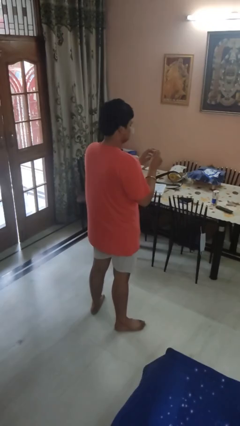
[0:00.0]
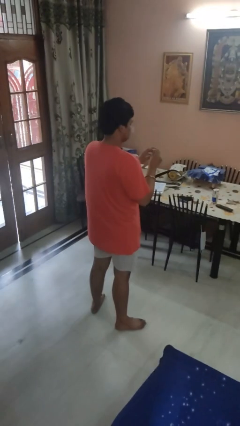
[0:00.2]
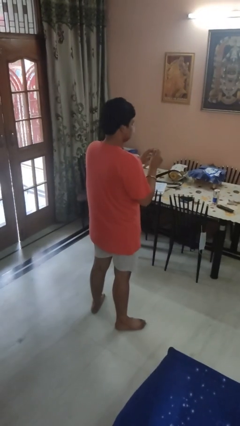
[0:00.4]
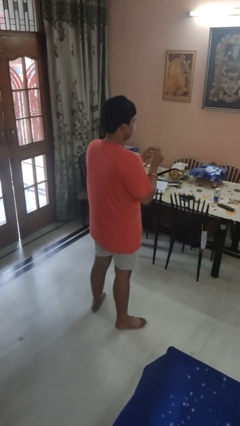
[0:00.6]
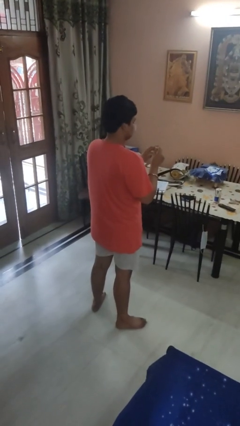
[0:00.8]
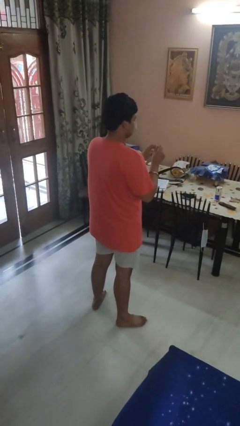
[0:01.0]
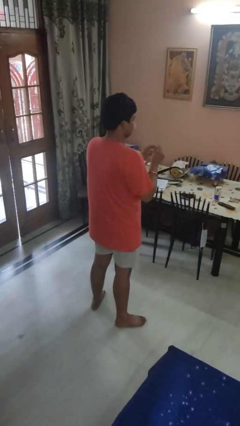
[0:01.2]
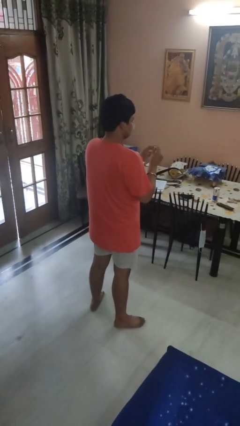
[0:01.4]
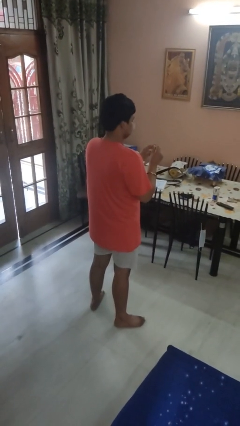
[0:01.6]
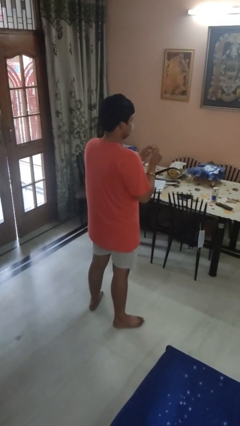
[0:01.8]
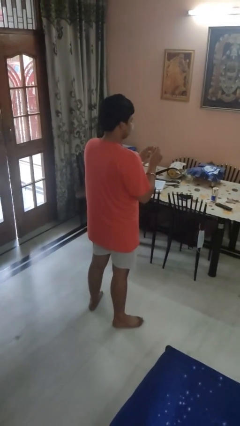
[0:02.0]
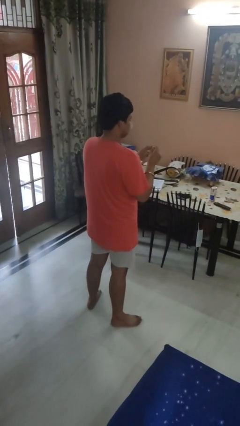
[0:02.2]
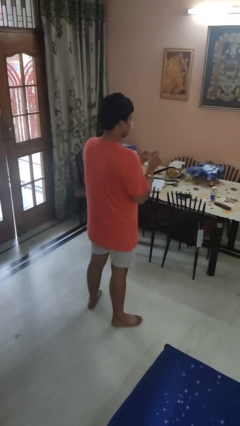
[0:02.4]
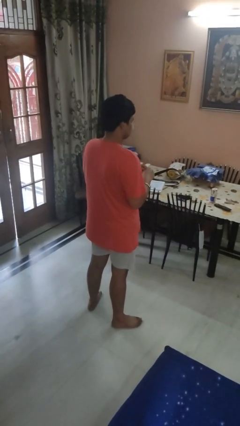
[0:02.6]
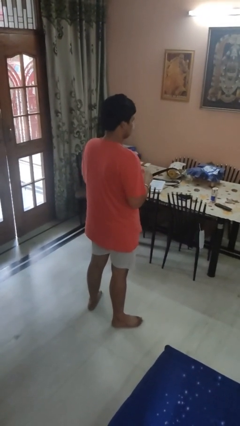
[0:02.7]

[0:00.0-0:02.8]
person files fingernails

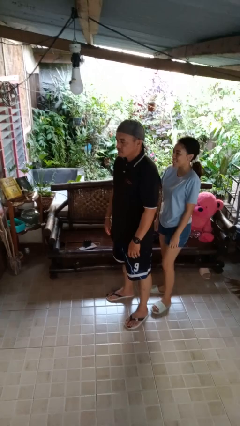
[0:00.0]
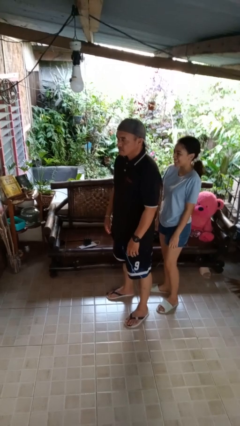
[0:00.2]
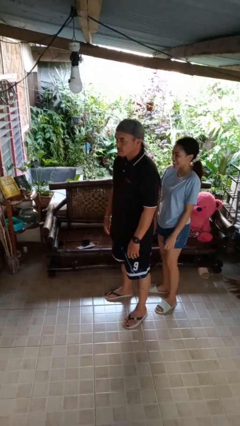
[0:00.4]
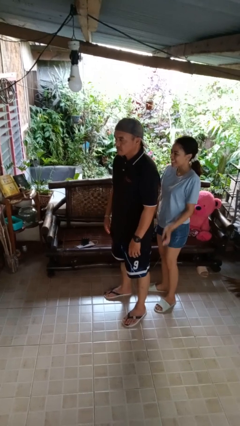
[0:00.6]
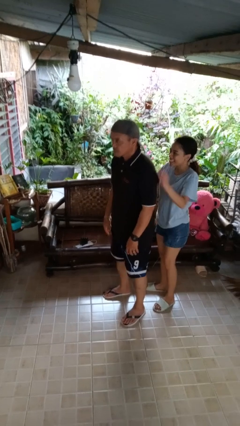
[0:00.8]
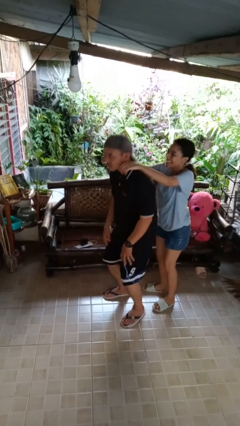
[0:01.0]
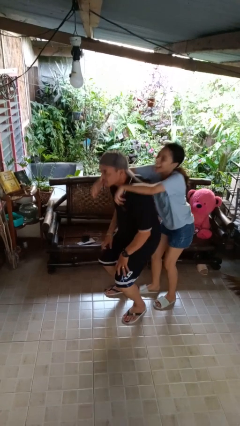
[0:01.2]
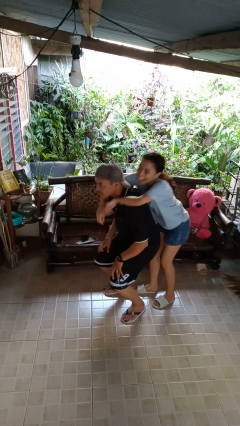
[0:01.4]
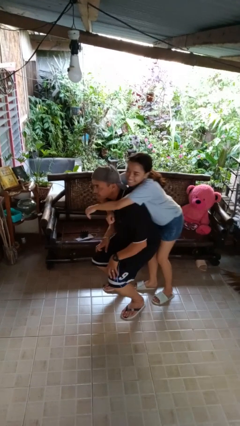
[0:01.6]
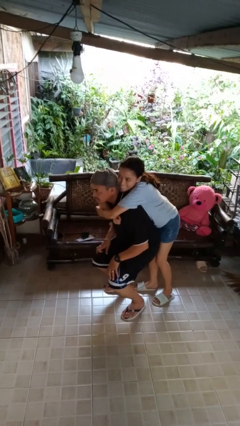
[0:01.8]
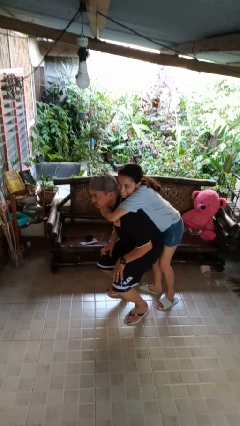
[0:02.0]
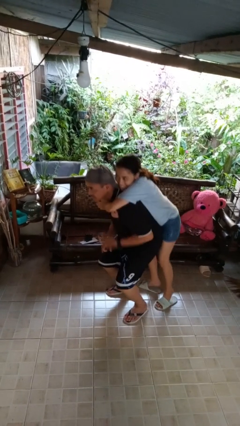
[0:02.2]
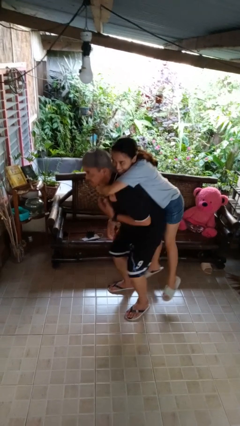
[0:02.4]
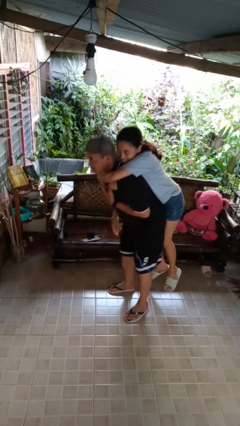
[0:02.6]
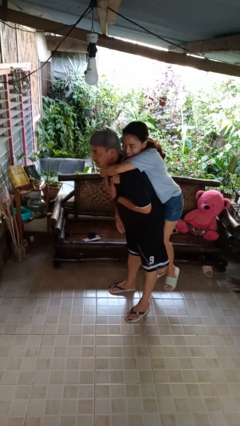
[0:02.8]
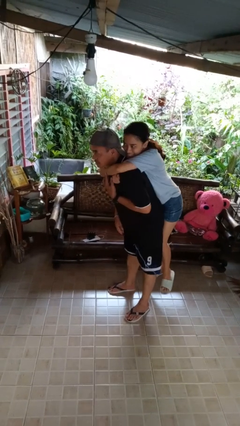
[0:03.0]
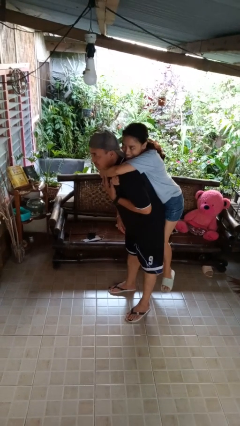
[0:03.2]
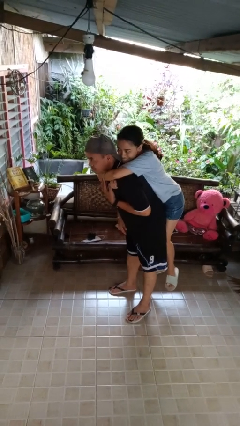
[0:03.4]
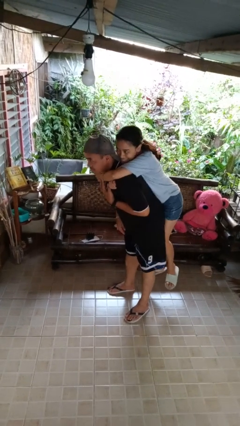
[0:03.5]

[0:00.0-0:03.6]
person picks up person

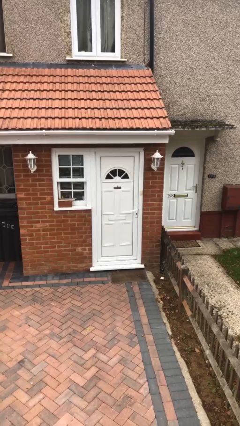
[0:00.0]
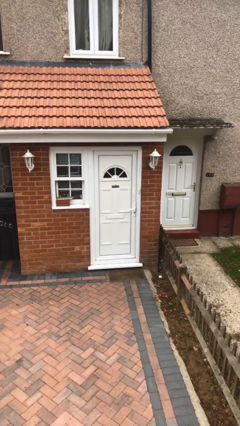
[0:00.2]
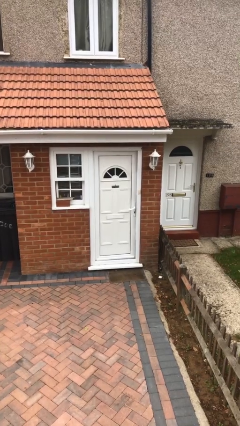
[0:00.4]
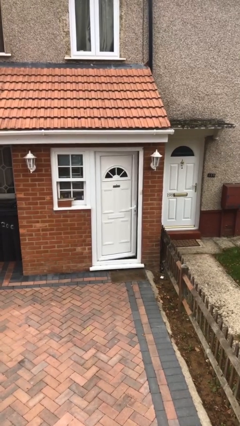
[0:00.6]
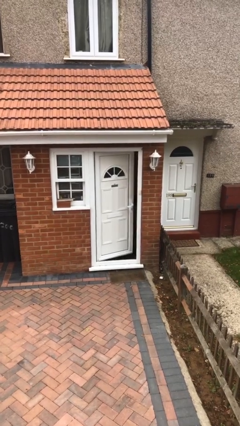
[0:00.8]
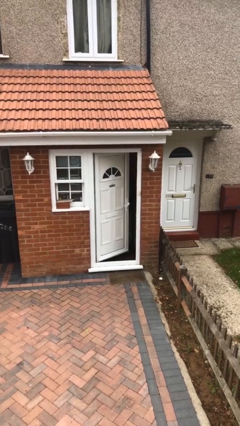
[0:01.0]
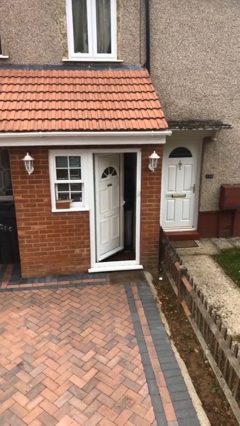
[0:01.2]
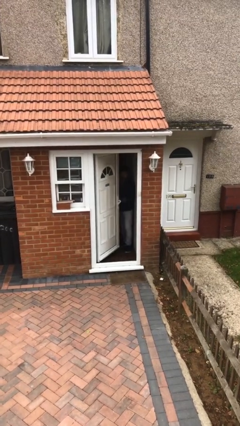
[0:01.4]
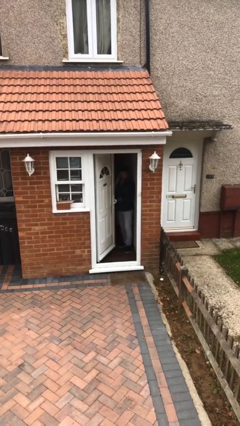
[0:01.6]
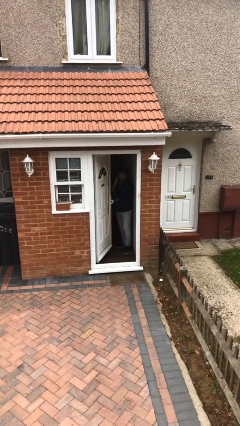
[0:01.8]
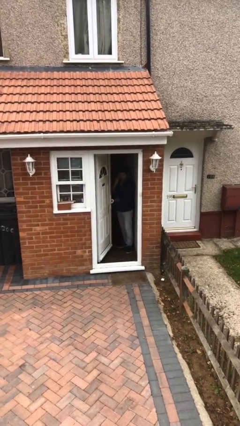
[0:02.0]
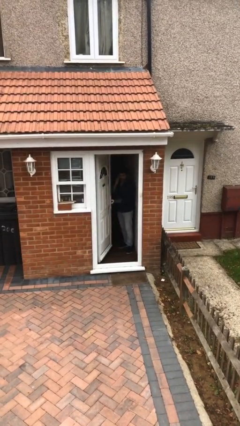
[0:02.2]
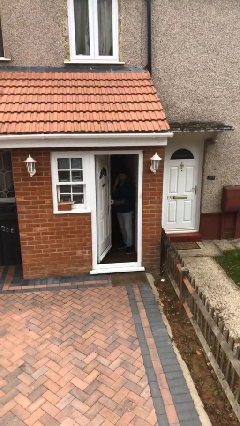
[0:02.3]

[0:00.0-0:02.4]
person opens facility door

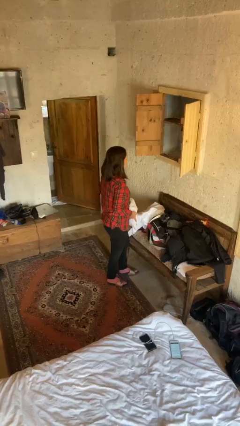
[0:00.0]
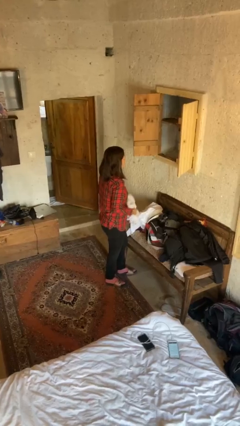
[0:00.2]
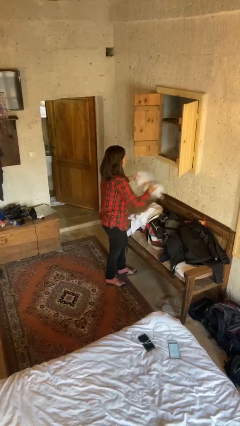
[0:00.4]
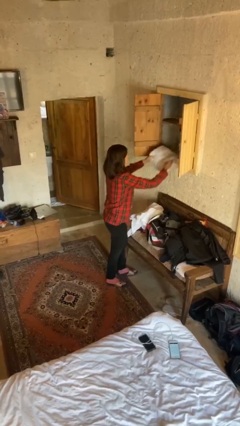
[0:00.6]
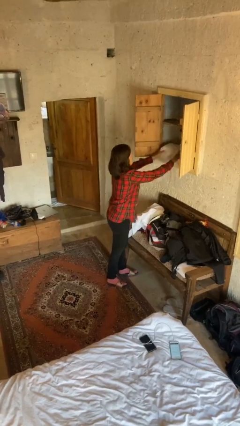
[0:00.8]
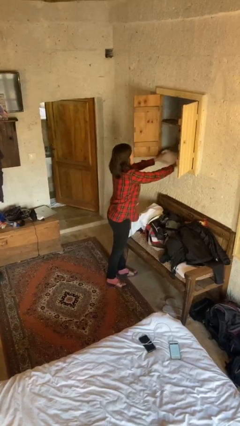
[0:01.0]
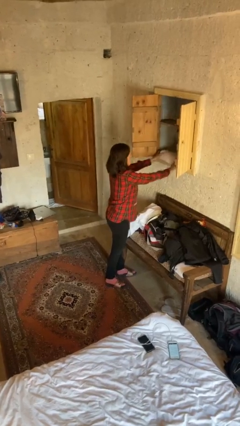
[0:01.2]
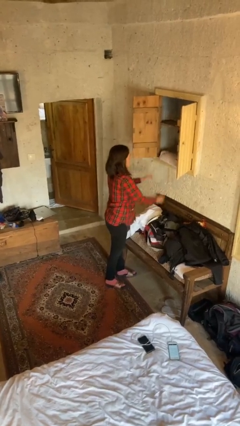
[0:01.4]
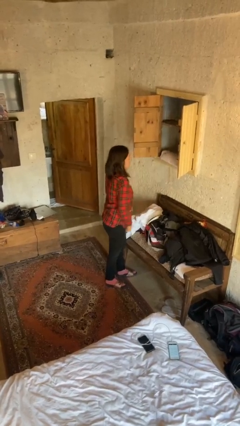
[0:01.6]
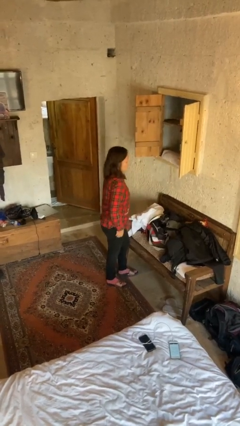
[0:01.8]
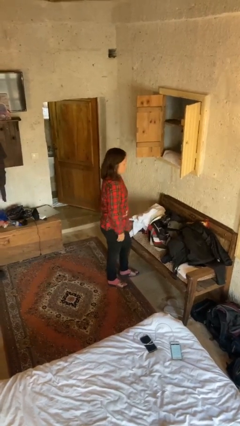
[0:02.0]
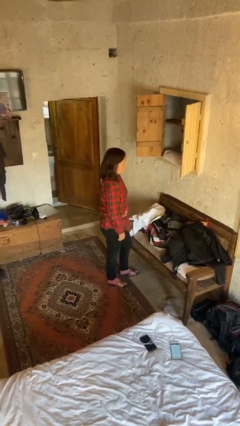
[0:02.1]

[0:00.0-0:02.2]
person puts clothes into dresser

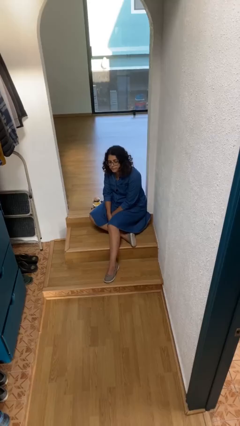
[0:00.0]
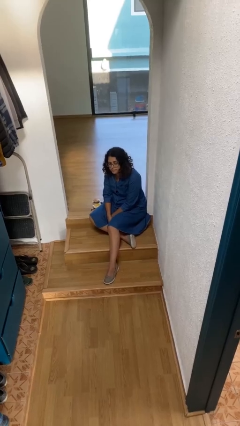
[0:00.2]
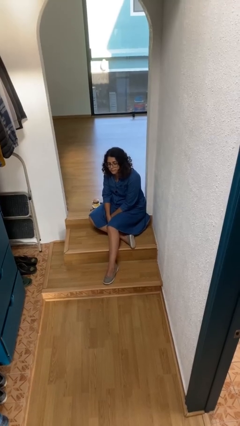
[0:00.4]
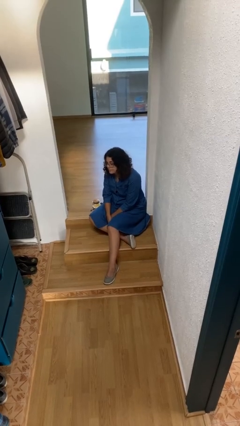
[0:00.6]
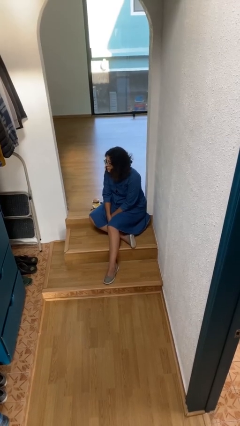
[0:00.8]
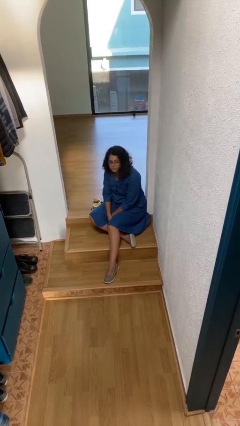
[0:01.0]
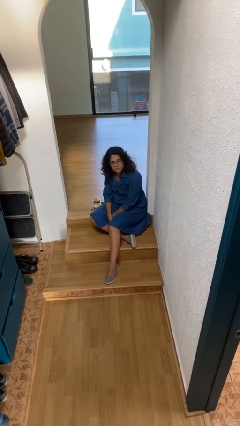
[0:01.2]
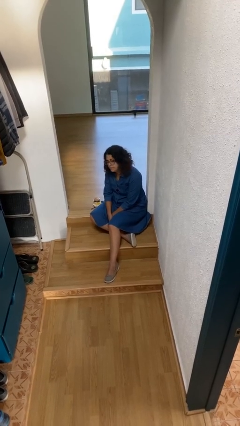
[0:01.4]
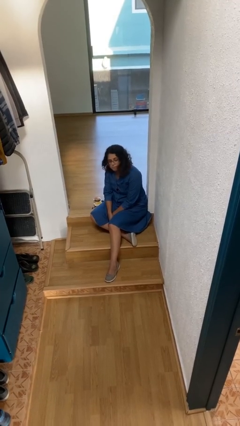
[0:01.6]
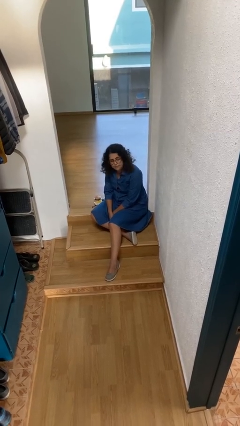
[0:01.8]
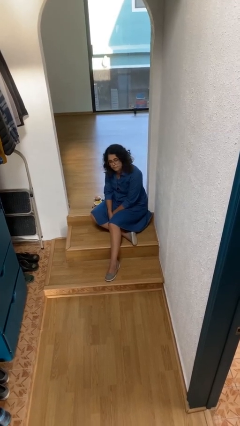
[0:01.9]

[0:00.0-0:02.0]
person shakes head

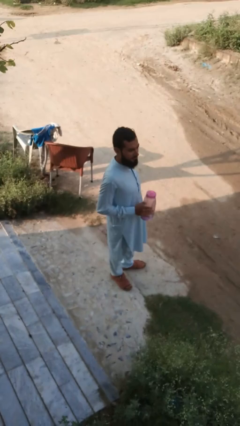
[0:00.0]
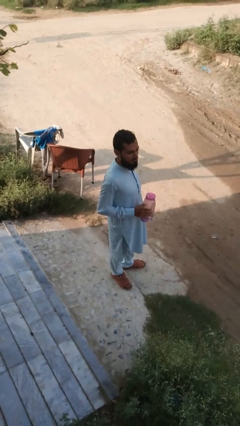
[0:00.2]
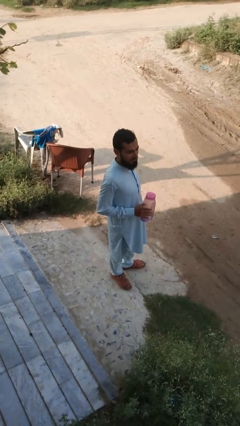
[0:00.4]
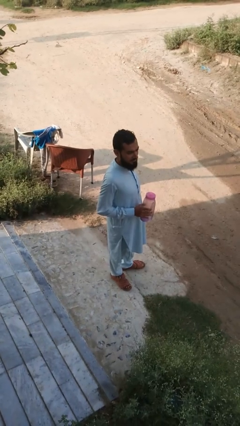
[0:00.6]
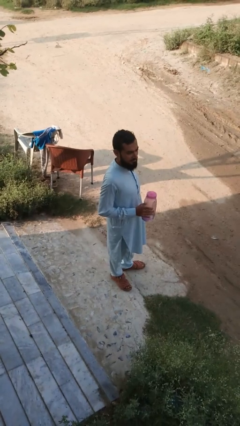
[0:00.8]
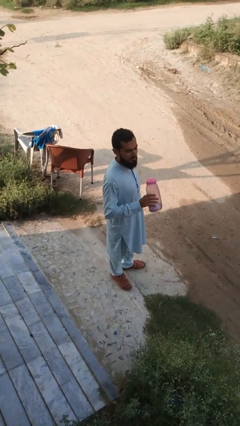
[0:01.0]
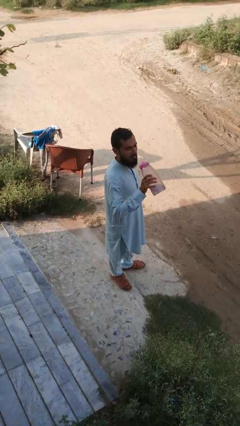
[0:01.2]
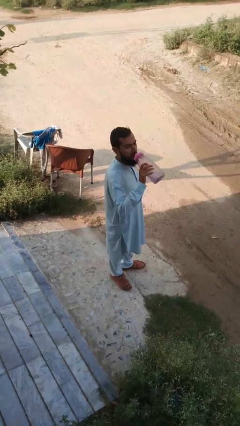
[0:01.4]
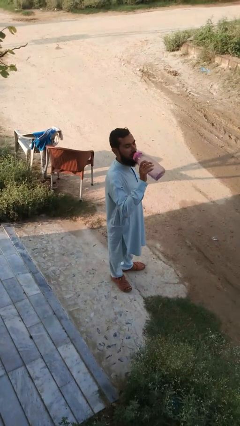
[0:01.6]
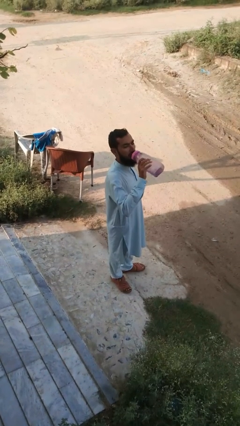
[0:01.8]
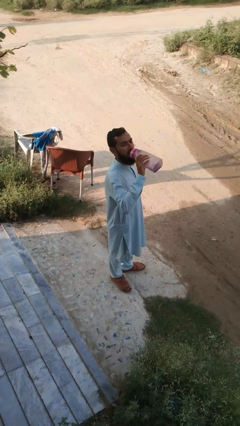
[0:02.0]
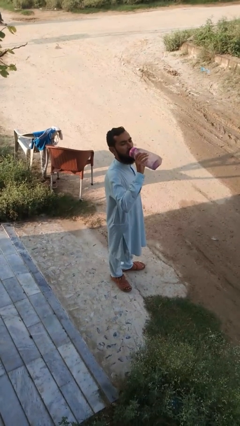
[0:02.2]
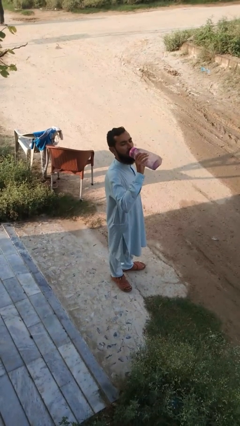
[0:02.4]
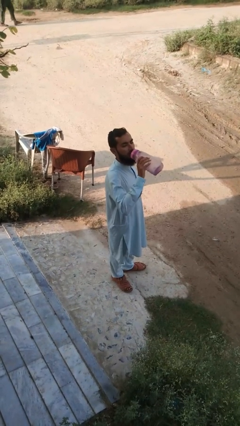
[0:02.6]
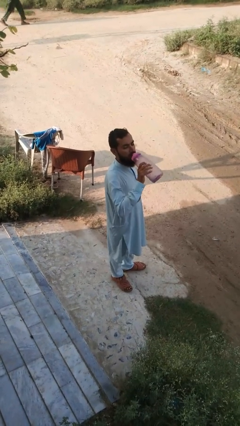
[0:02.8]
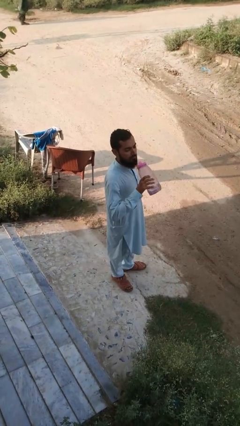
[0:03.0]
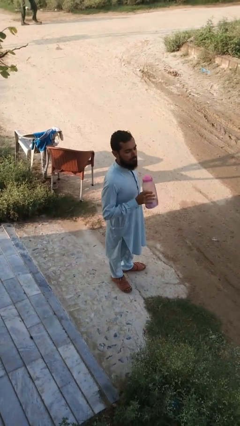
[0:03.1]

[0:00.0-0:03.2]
person drinks from bottle

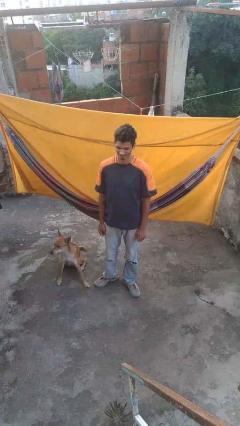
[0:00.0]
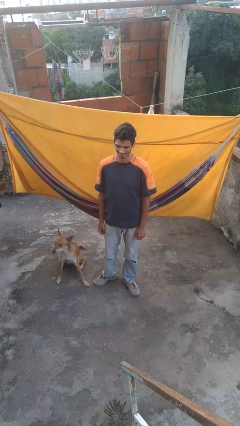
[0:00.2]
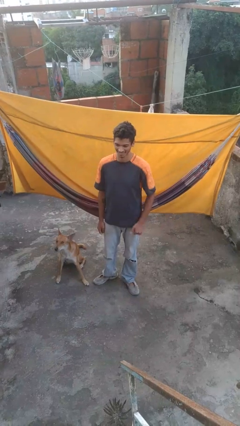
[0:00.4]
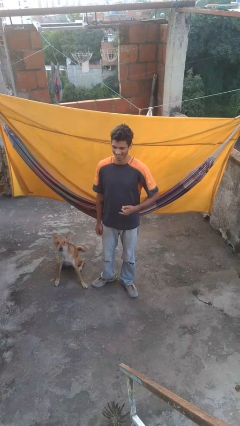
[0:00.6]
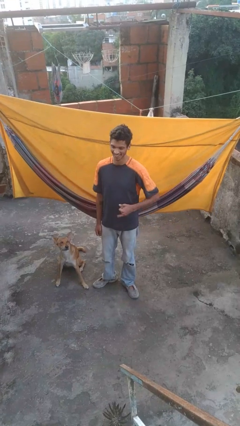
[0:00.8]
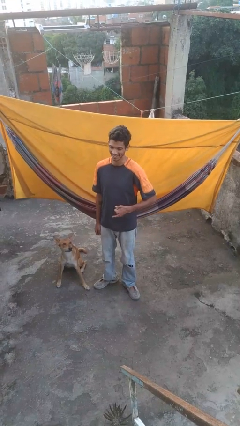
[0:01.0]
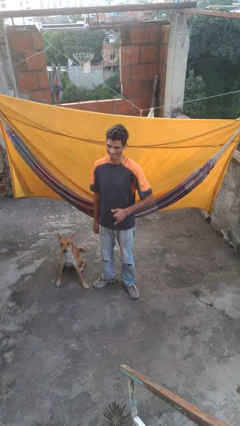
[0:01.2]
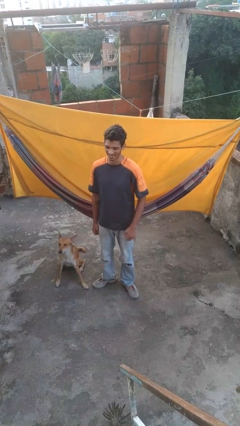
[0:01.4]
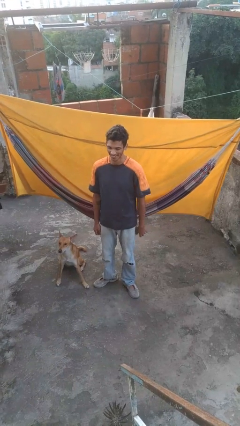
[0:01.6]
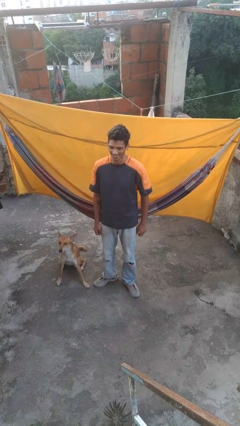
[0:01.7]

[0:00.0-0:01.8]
person gestures hang loose
